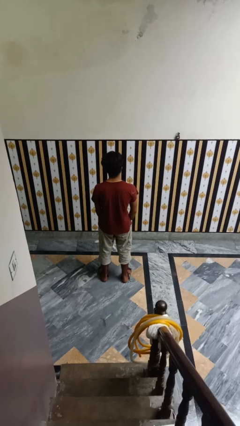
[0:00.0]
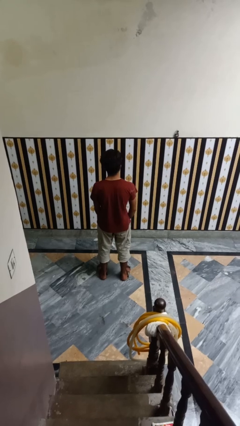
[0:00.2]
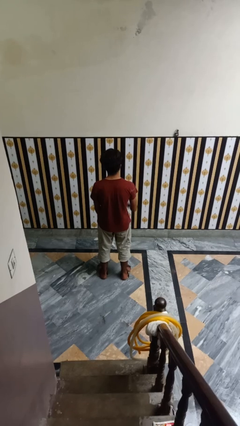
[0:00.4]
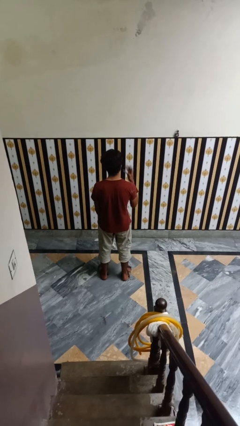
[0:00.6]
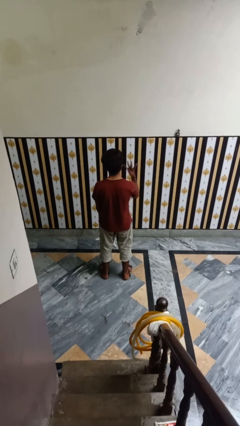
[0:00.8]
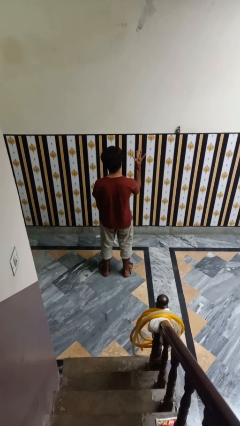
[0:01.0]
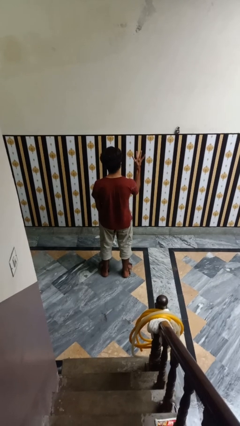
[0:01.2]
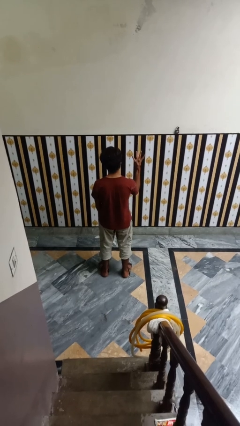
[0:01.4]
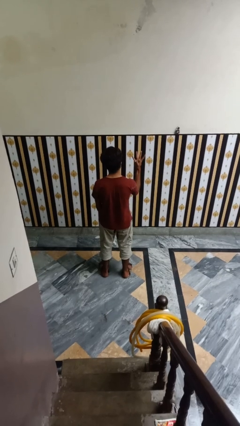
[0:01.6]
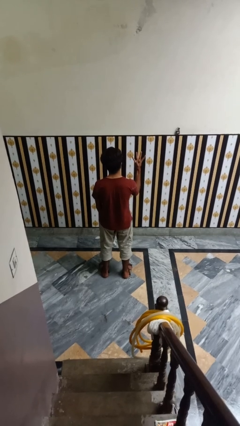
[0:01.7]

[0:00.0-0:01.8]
person gestures number four

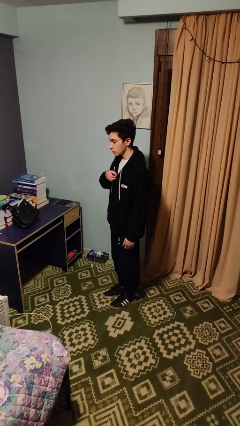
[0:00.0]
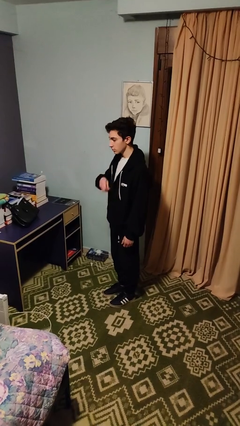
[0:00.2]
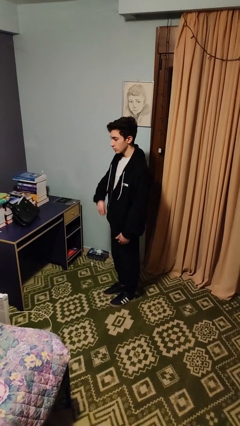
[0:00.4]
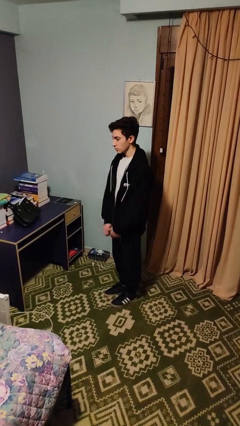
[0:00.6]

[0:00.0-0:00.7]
person unzips jacket

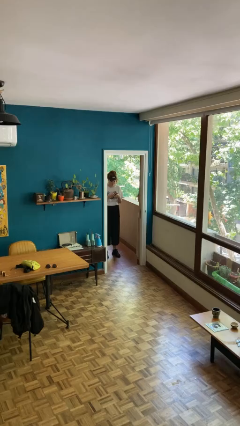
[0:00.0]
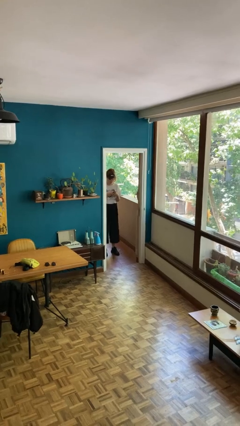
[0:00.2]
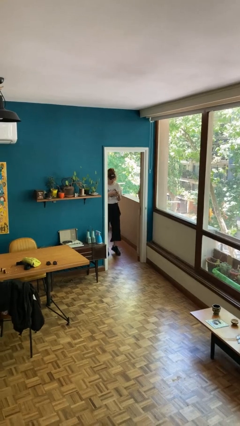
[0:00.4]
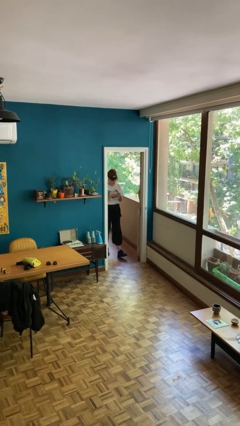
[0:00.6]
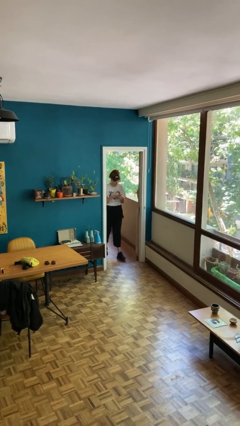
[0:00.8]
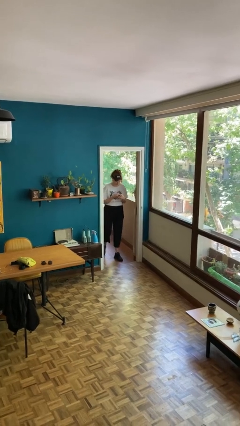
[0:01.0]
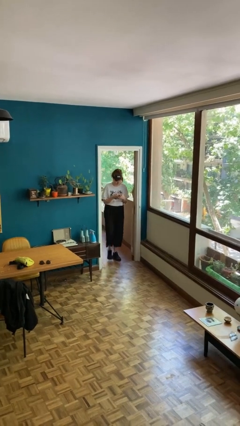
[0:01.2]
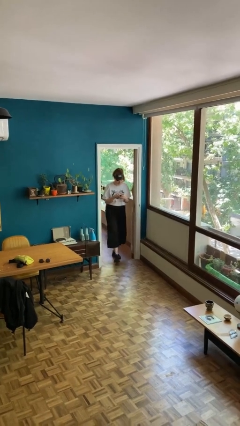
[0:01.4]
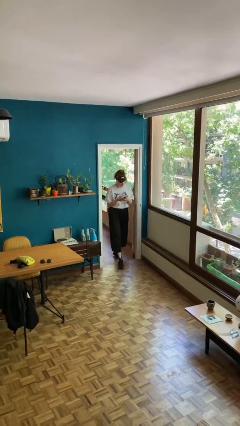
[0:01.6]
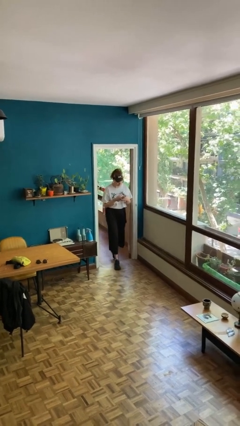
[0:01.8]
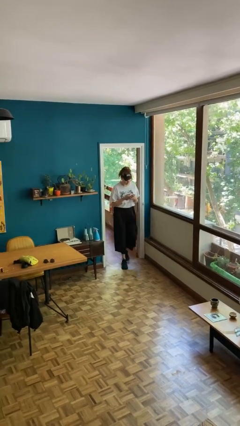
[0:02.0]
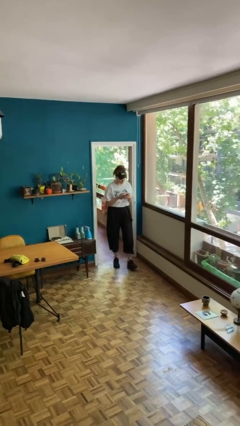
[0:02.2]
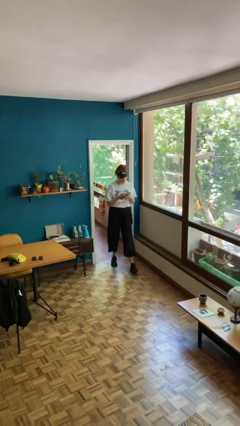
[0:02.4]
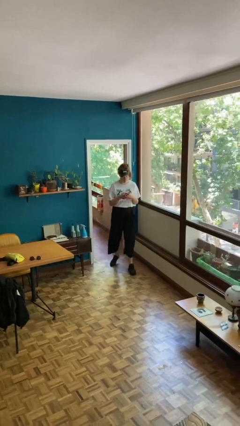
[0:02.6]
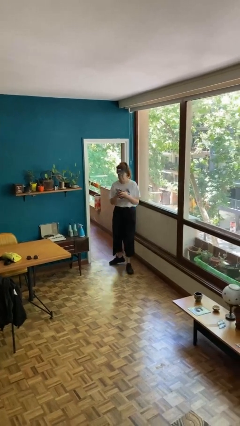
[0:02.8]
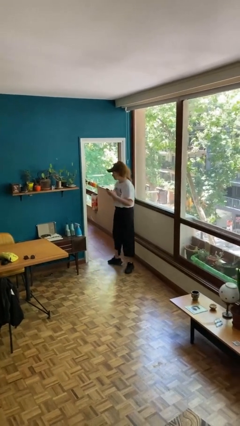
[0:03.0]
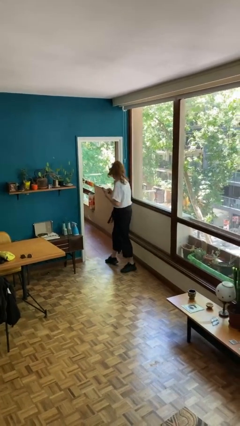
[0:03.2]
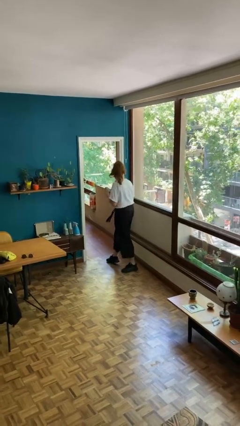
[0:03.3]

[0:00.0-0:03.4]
person enters scene through structure

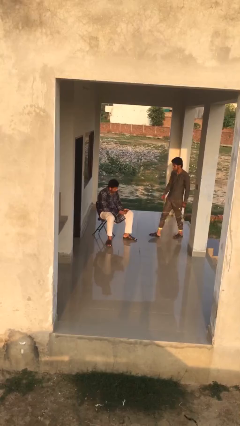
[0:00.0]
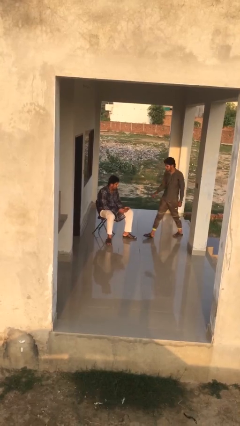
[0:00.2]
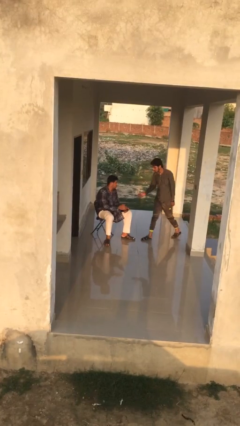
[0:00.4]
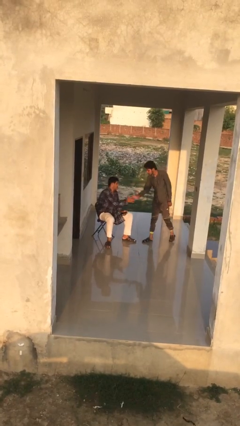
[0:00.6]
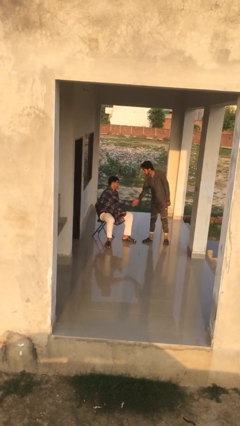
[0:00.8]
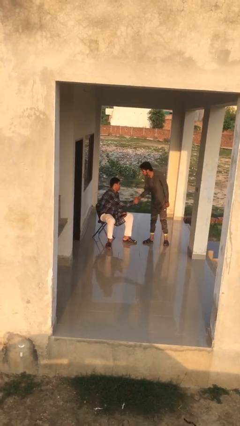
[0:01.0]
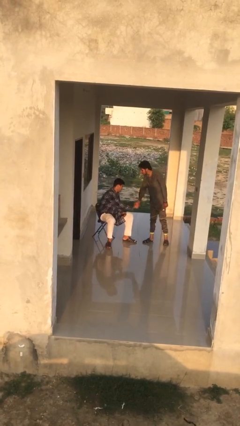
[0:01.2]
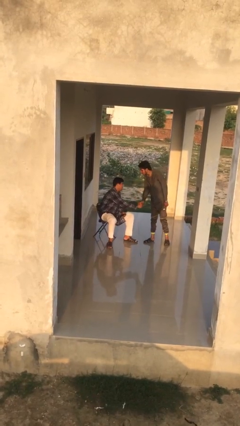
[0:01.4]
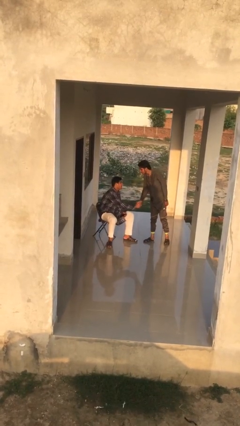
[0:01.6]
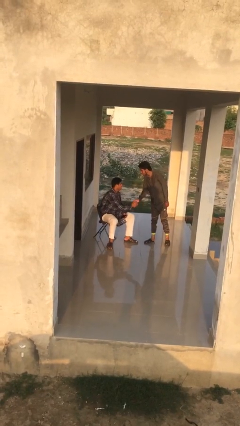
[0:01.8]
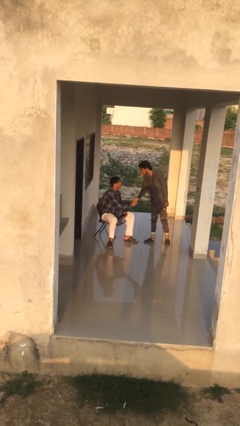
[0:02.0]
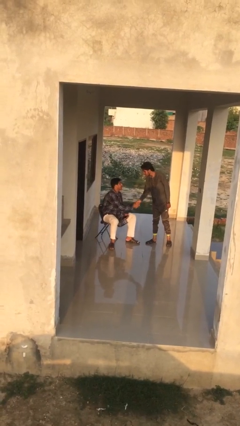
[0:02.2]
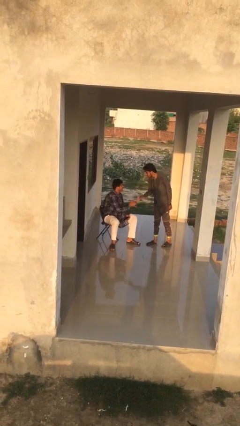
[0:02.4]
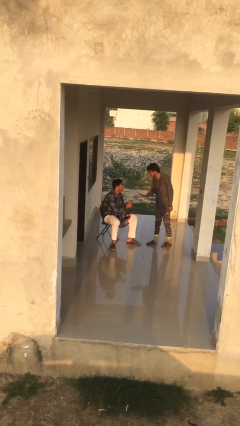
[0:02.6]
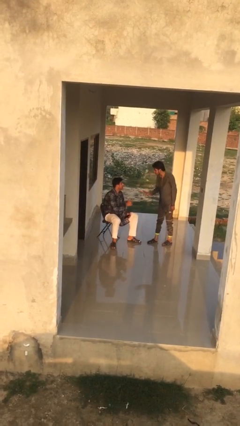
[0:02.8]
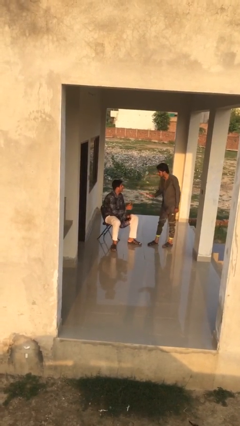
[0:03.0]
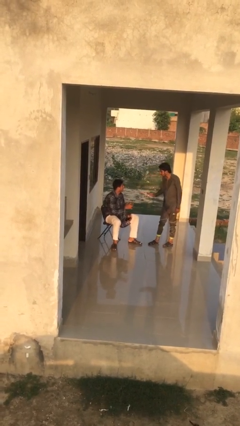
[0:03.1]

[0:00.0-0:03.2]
person shakes hand

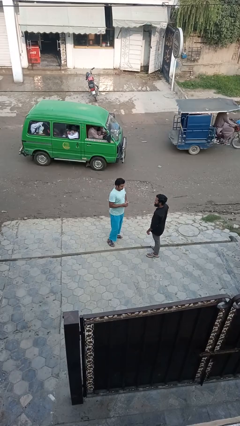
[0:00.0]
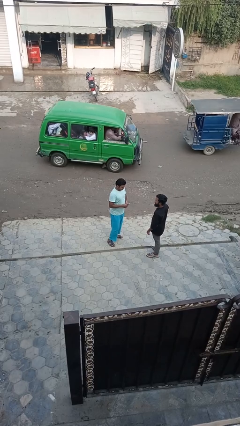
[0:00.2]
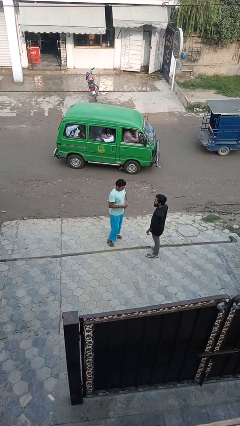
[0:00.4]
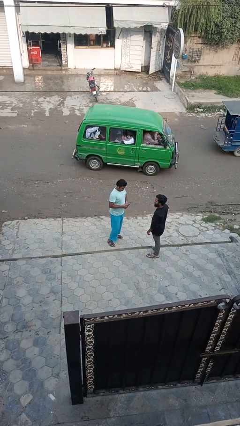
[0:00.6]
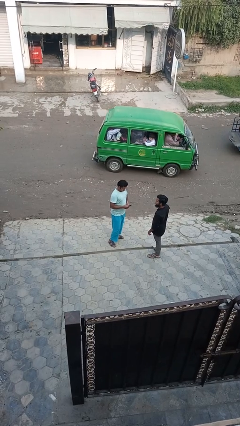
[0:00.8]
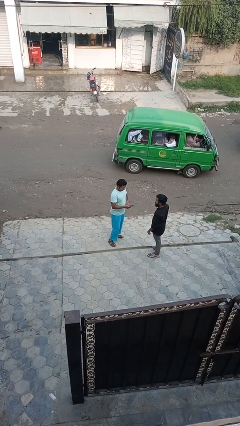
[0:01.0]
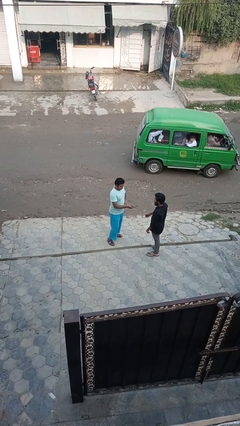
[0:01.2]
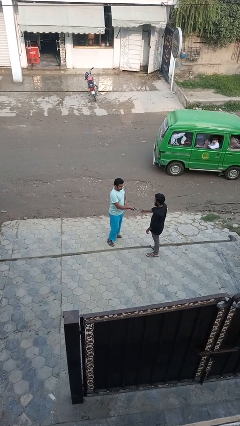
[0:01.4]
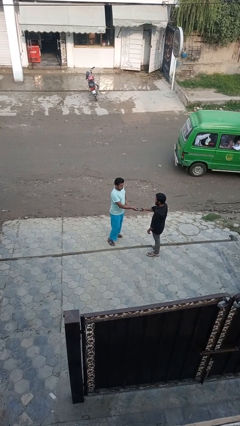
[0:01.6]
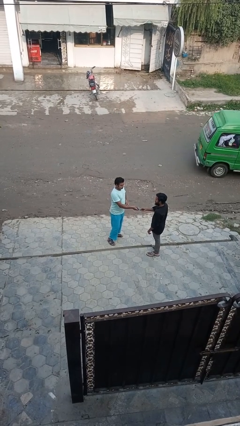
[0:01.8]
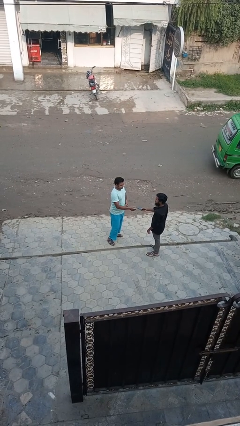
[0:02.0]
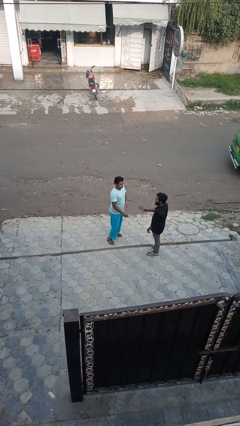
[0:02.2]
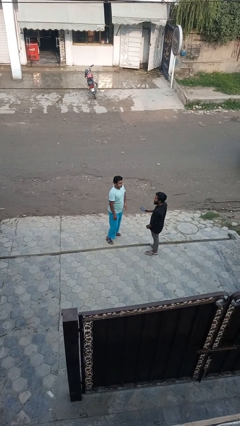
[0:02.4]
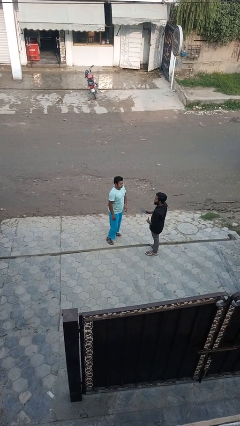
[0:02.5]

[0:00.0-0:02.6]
person transfers object to person

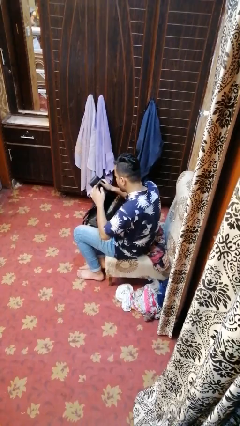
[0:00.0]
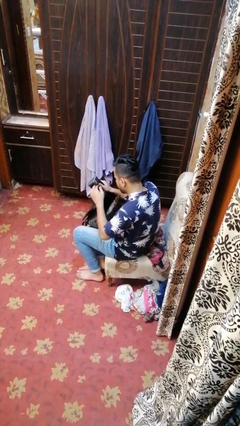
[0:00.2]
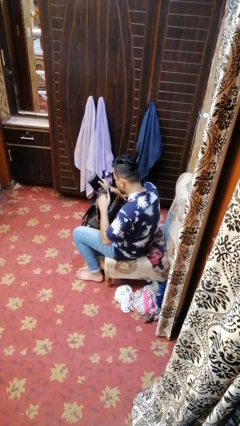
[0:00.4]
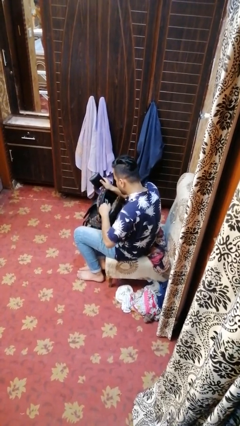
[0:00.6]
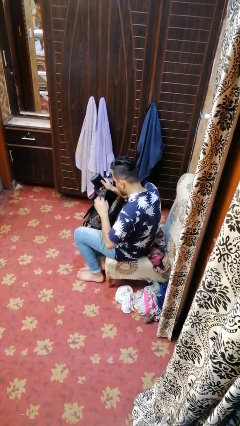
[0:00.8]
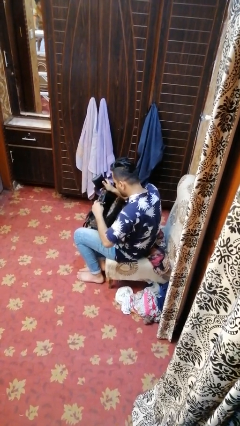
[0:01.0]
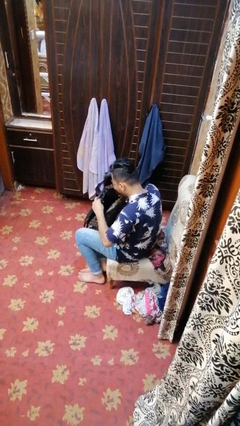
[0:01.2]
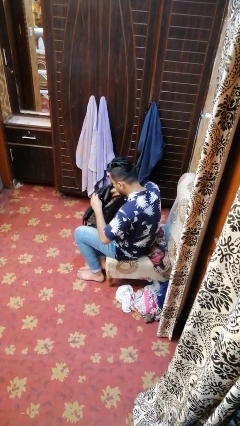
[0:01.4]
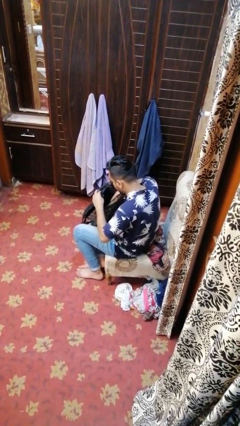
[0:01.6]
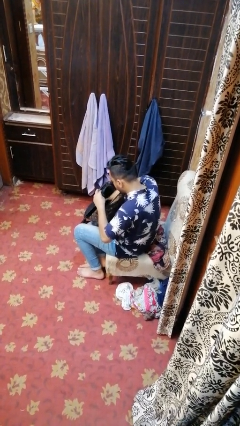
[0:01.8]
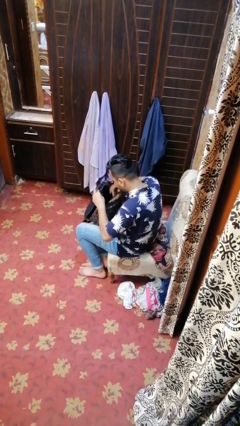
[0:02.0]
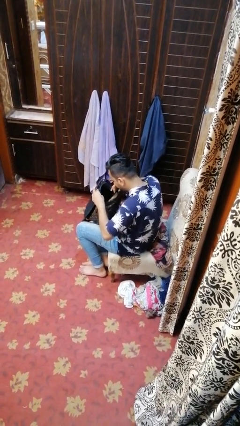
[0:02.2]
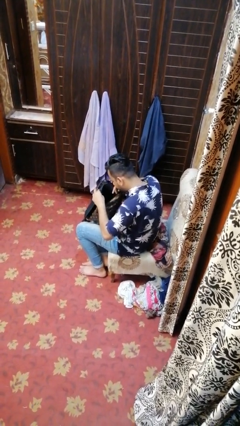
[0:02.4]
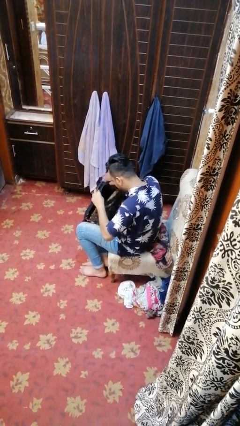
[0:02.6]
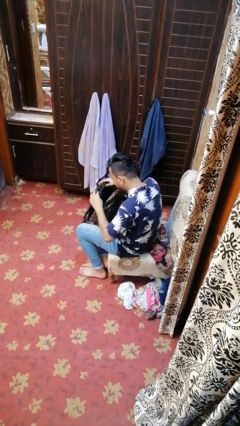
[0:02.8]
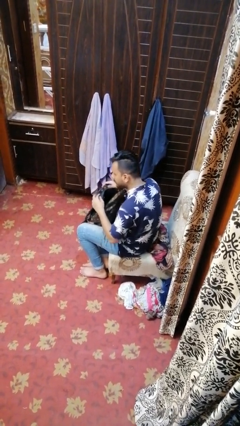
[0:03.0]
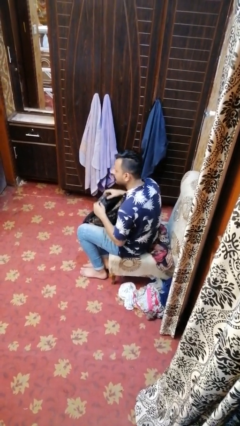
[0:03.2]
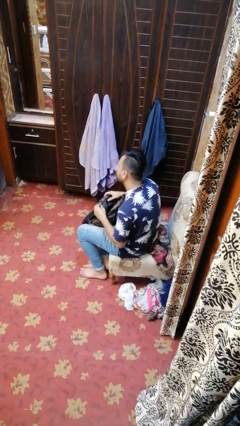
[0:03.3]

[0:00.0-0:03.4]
person puts object into backpack

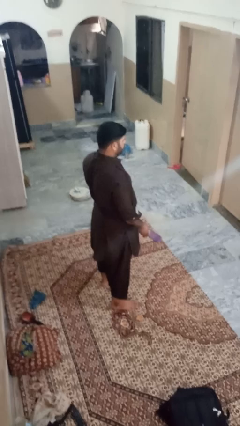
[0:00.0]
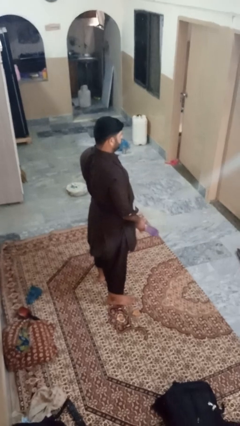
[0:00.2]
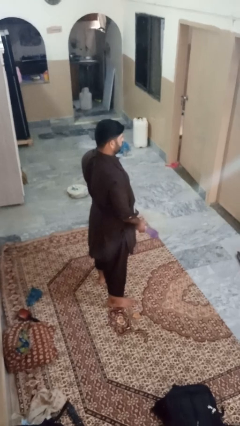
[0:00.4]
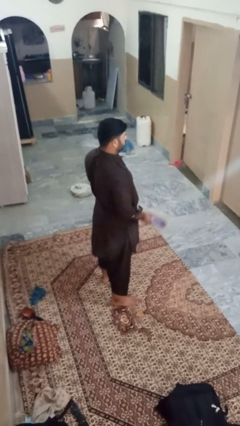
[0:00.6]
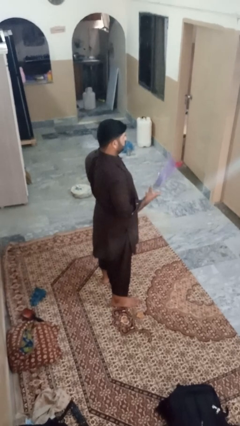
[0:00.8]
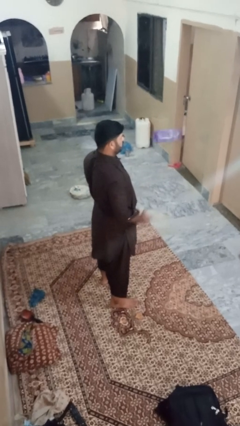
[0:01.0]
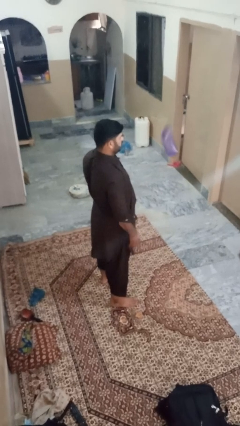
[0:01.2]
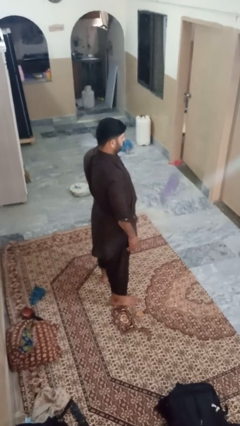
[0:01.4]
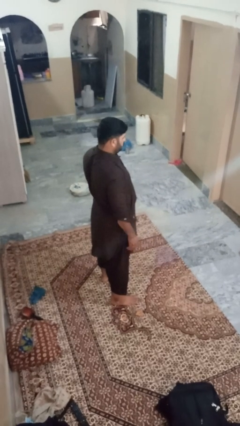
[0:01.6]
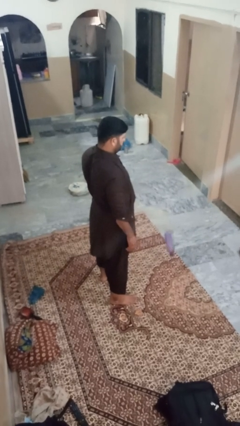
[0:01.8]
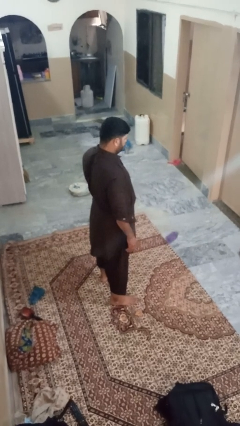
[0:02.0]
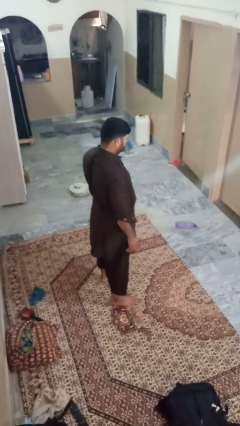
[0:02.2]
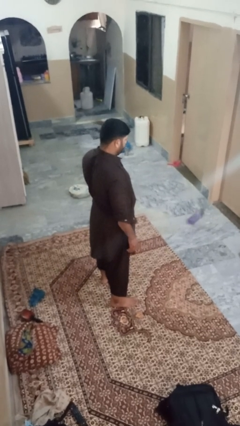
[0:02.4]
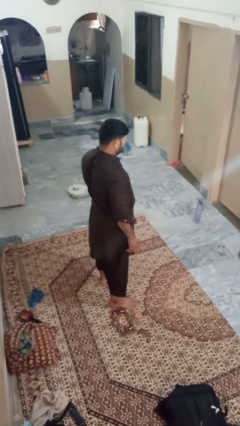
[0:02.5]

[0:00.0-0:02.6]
person throws object into air
